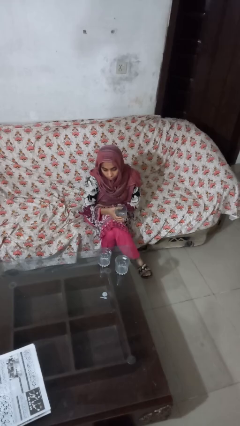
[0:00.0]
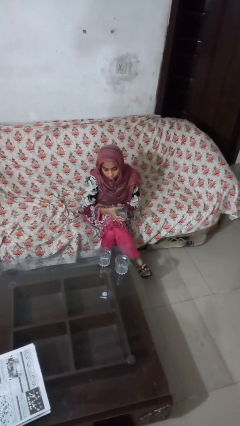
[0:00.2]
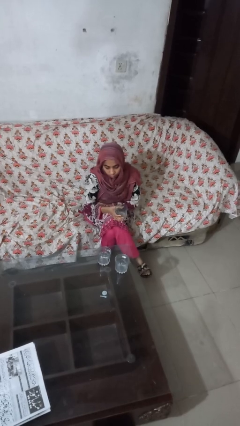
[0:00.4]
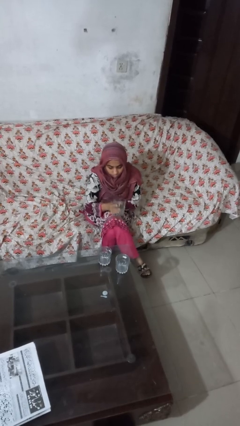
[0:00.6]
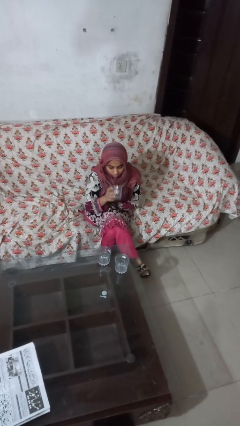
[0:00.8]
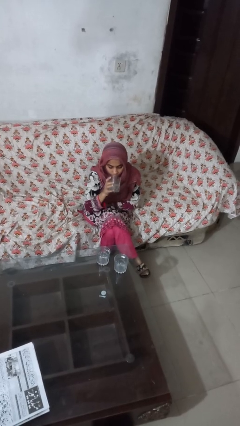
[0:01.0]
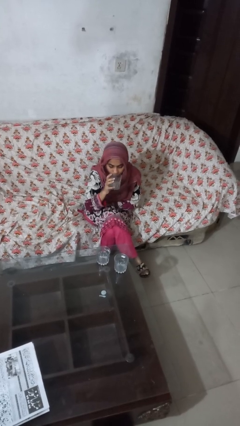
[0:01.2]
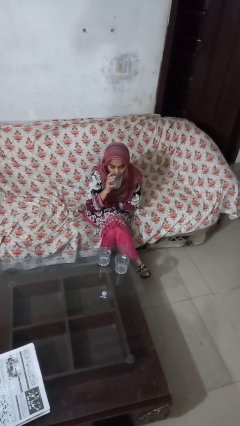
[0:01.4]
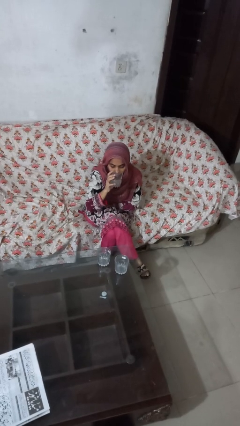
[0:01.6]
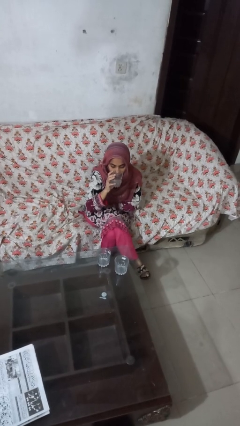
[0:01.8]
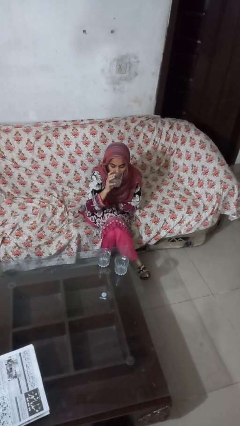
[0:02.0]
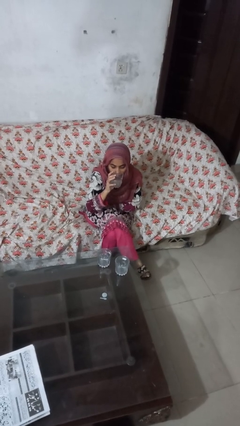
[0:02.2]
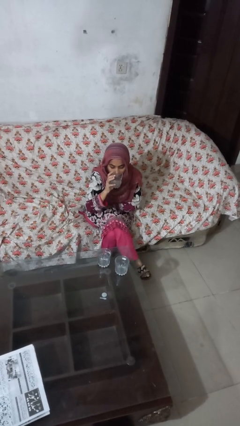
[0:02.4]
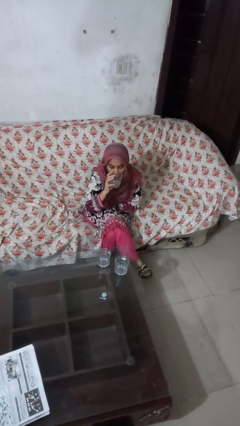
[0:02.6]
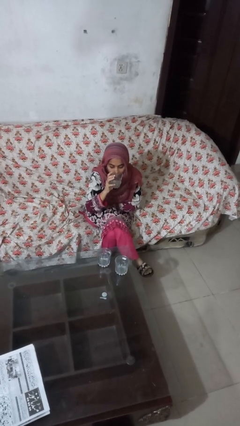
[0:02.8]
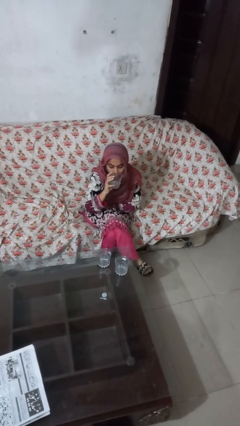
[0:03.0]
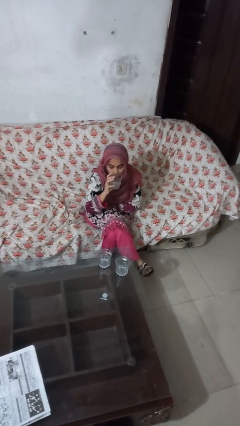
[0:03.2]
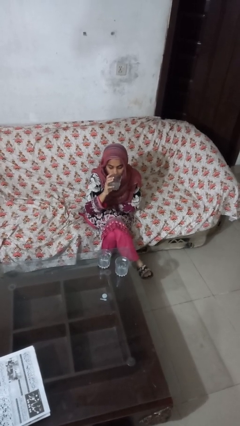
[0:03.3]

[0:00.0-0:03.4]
person drinks from shotglass

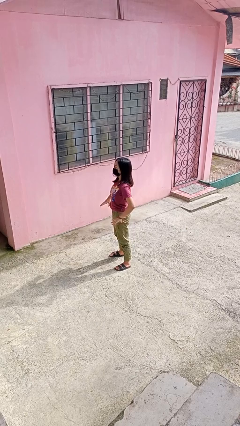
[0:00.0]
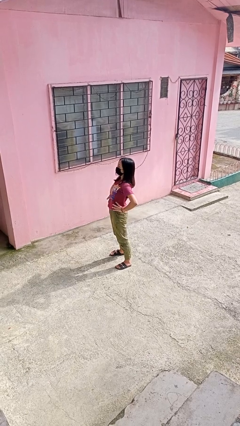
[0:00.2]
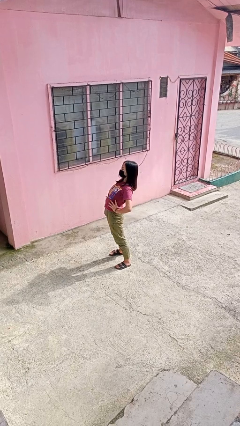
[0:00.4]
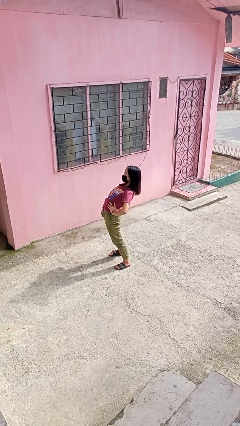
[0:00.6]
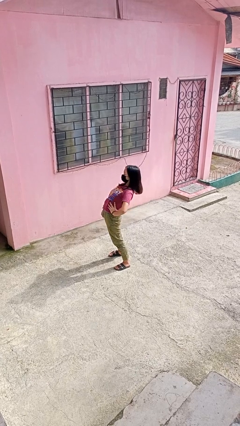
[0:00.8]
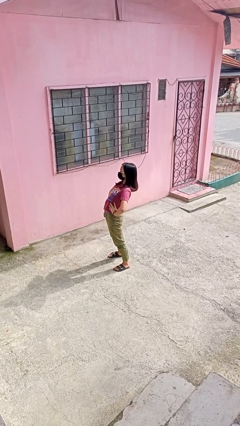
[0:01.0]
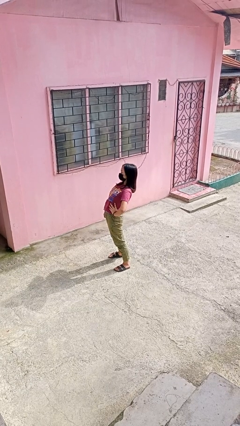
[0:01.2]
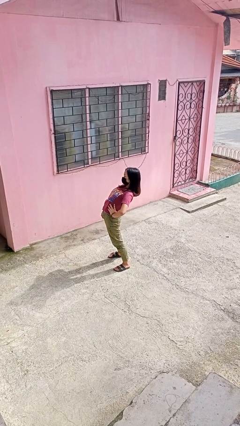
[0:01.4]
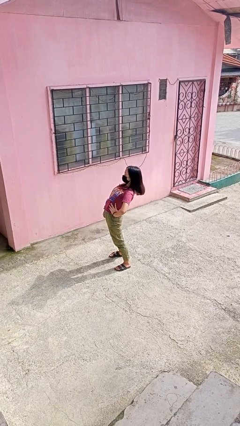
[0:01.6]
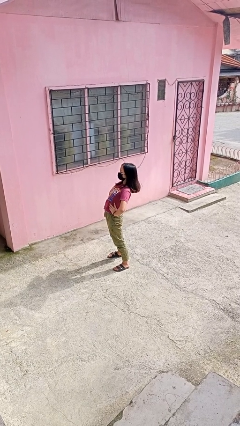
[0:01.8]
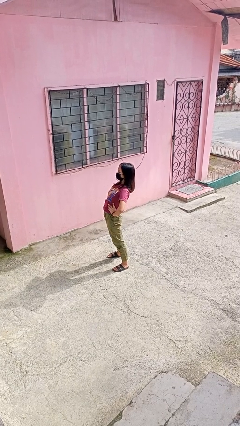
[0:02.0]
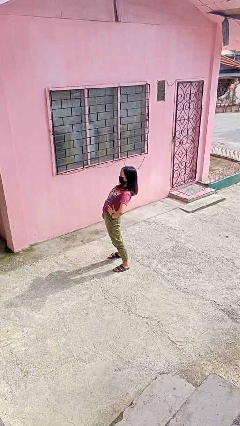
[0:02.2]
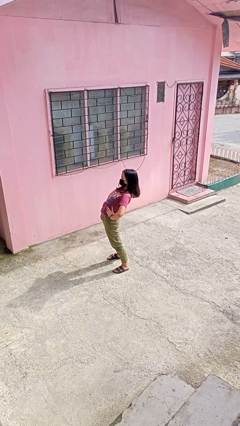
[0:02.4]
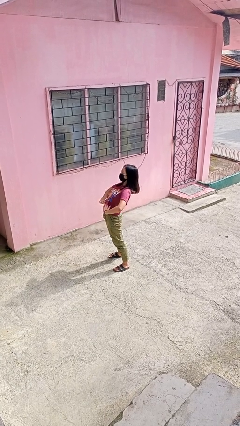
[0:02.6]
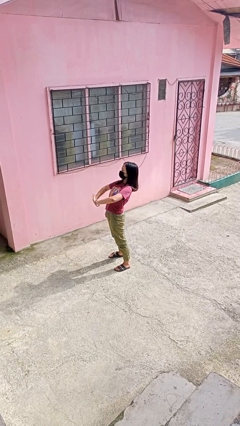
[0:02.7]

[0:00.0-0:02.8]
person stretches back

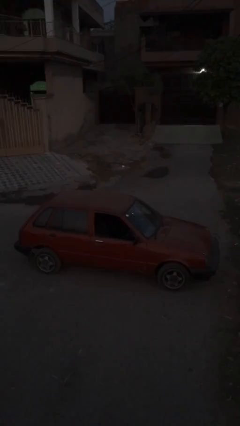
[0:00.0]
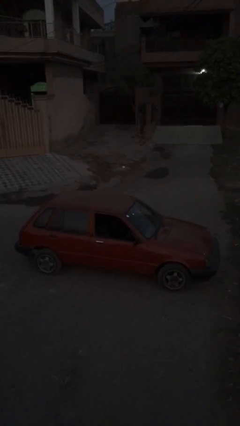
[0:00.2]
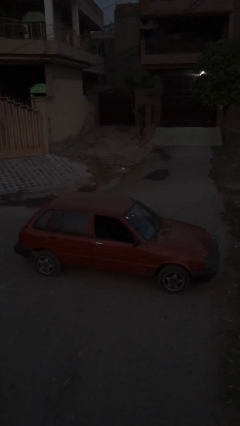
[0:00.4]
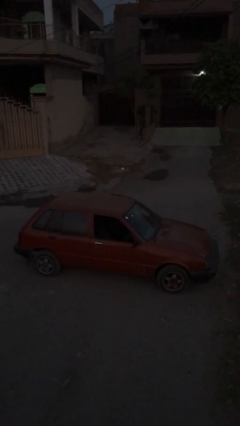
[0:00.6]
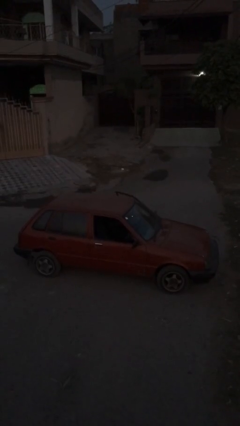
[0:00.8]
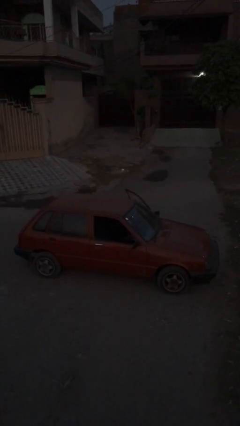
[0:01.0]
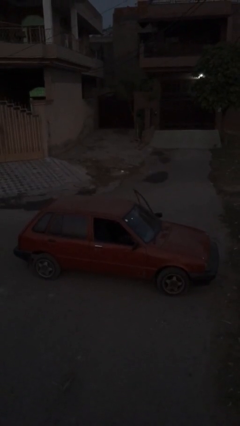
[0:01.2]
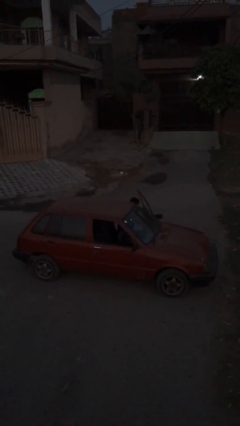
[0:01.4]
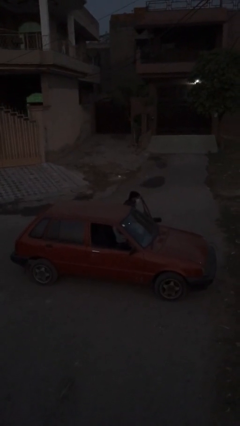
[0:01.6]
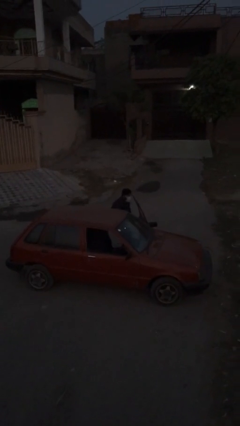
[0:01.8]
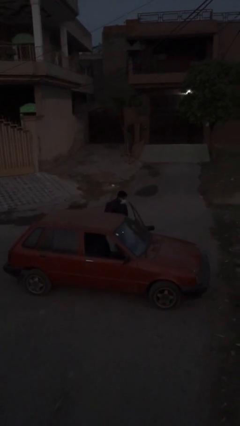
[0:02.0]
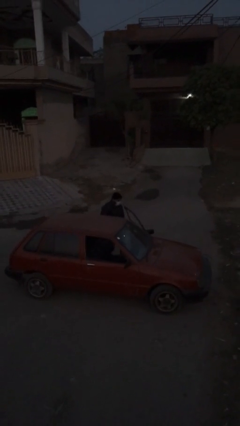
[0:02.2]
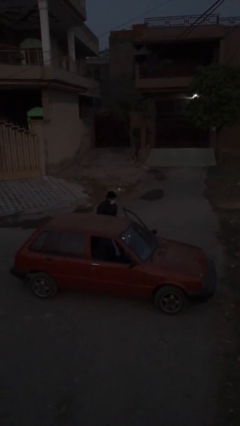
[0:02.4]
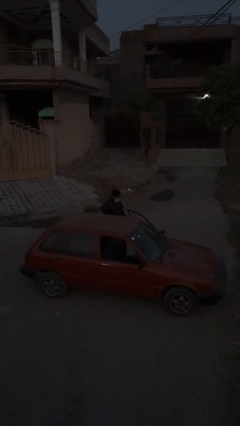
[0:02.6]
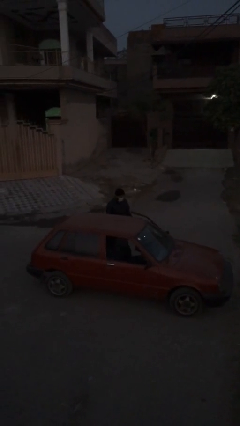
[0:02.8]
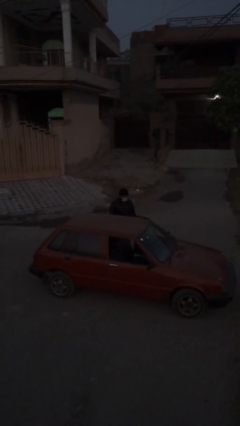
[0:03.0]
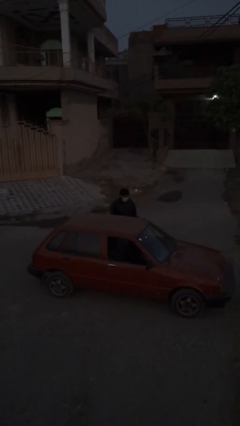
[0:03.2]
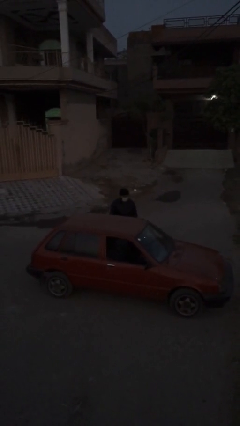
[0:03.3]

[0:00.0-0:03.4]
person exits car

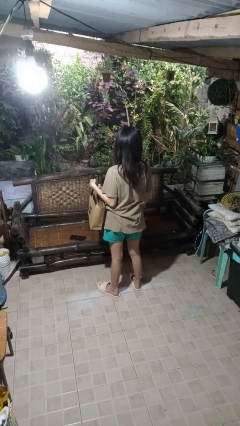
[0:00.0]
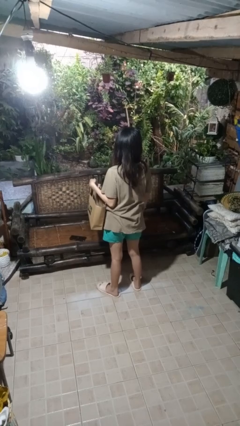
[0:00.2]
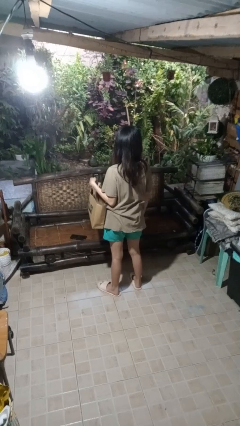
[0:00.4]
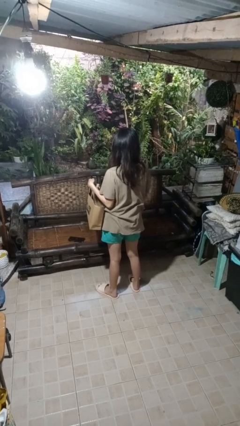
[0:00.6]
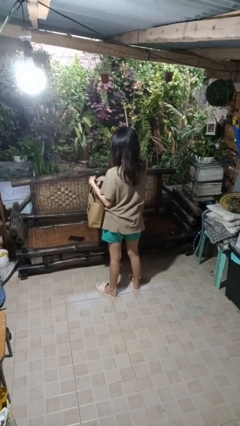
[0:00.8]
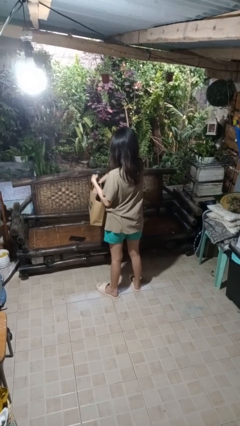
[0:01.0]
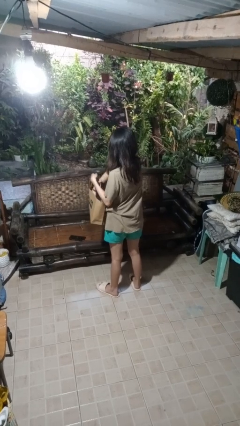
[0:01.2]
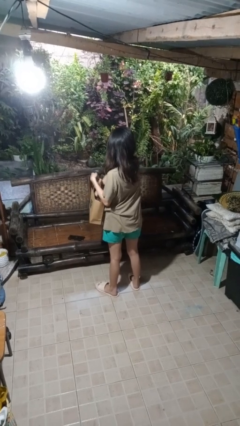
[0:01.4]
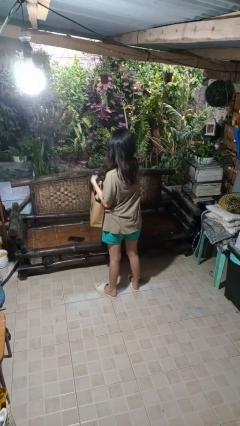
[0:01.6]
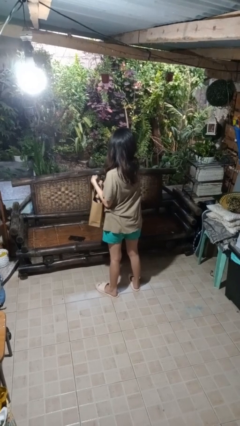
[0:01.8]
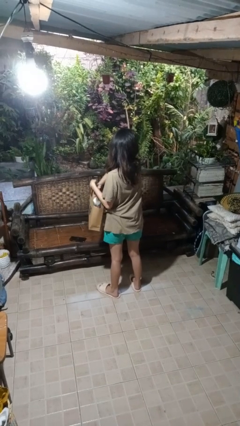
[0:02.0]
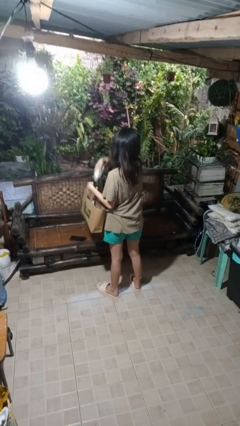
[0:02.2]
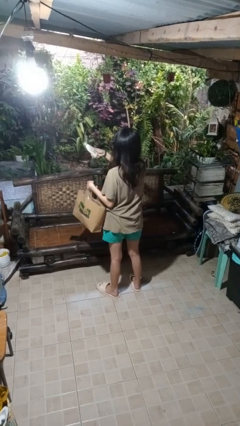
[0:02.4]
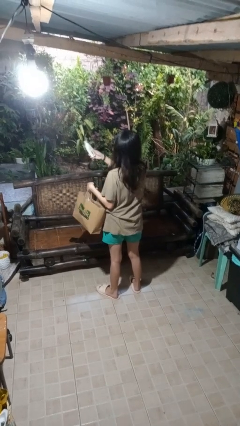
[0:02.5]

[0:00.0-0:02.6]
person takes object from bag

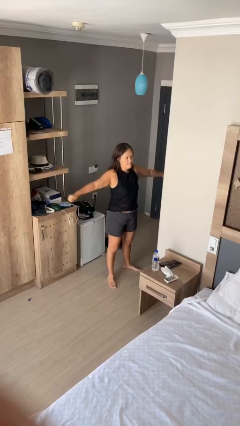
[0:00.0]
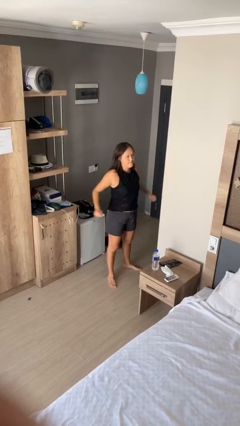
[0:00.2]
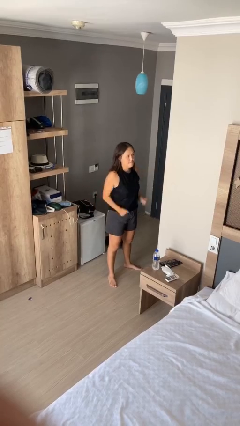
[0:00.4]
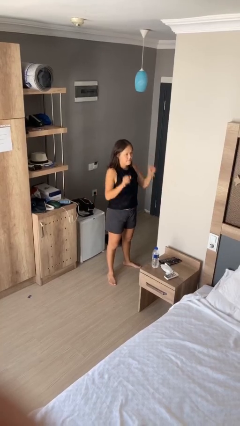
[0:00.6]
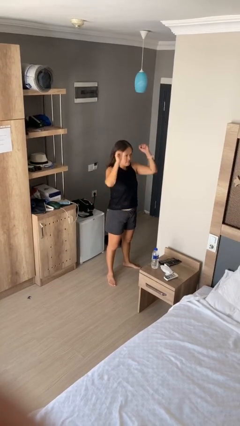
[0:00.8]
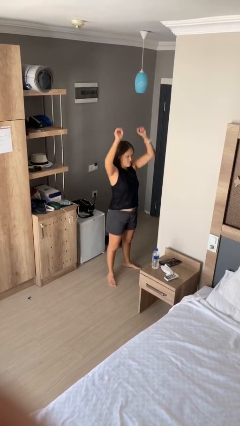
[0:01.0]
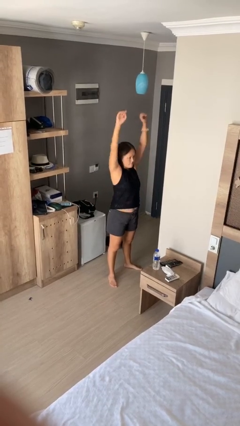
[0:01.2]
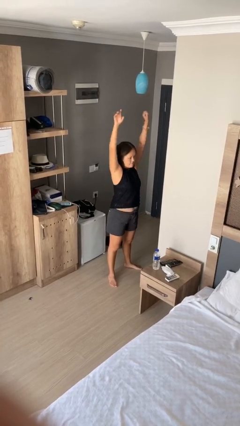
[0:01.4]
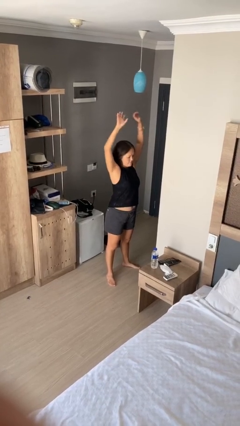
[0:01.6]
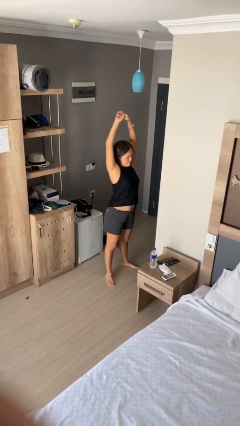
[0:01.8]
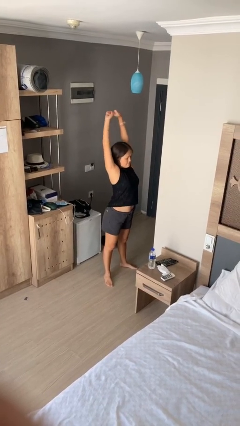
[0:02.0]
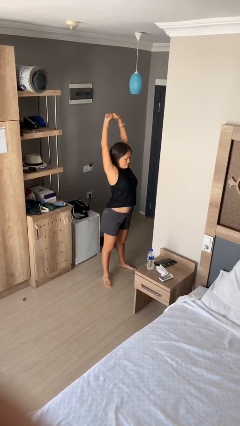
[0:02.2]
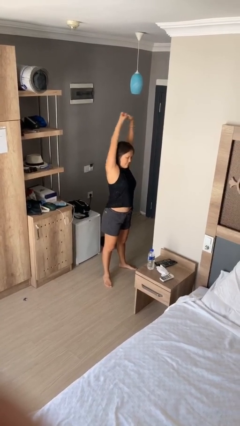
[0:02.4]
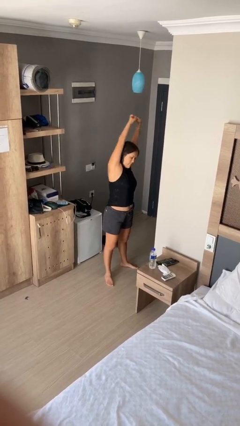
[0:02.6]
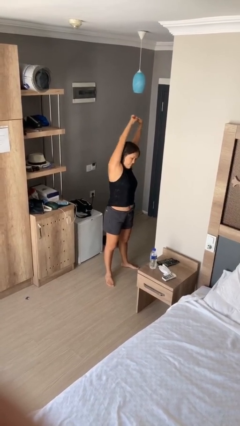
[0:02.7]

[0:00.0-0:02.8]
person stretches arms over head

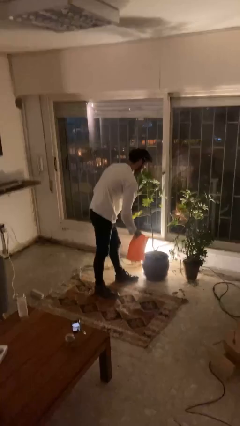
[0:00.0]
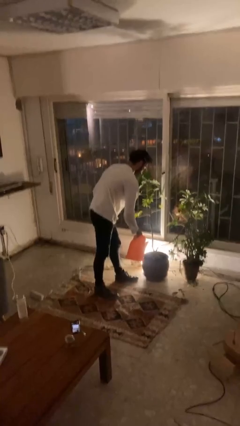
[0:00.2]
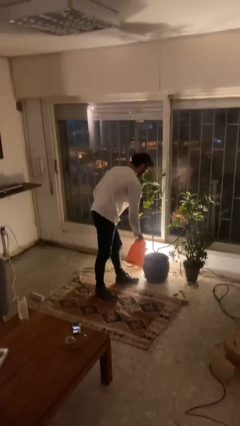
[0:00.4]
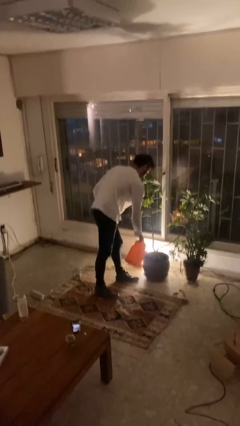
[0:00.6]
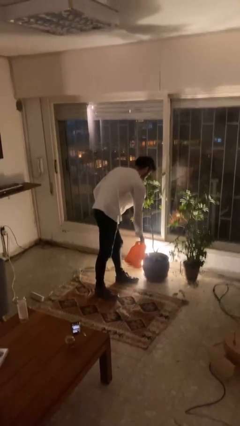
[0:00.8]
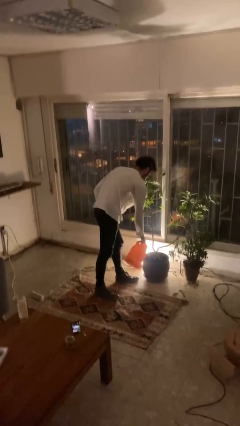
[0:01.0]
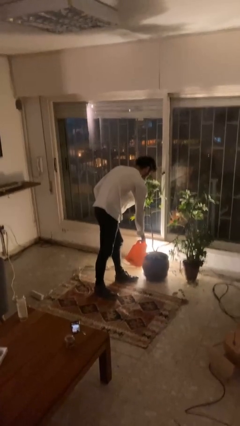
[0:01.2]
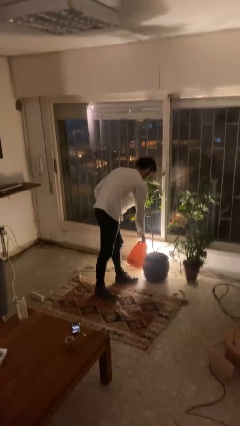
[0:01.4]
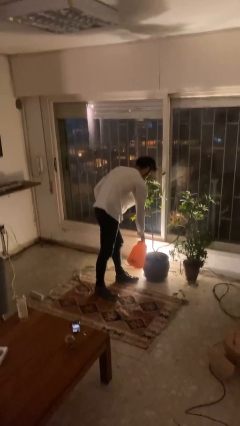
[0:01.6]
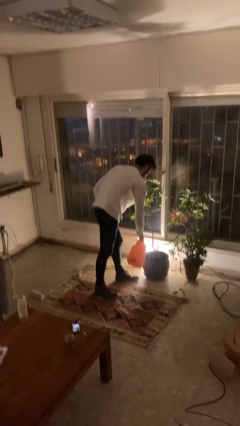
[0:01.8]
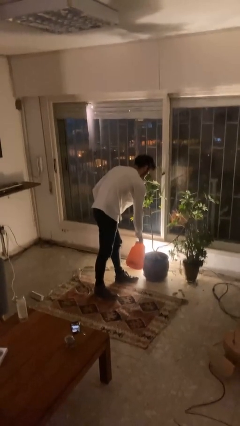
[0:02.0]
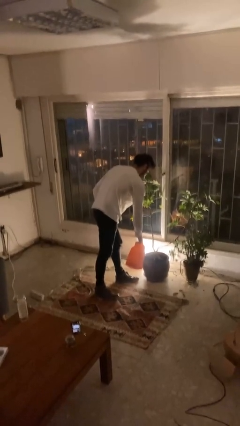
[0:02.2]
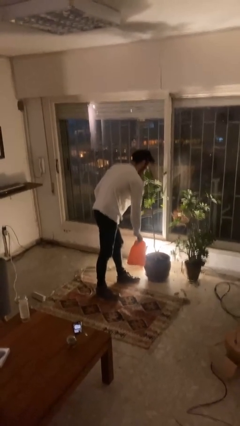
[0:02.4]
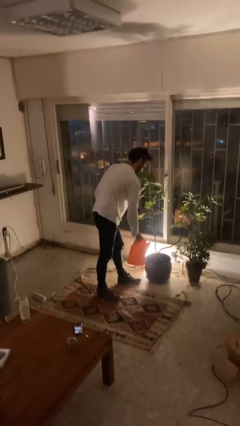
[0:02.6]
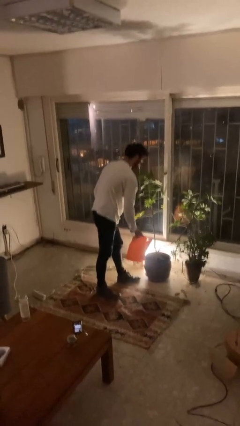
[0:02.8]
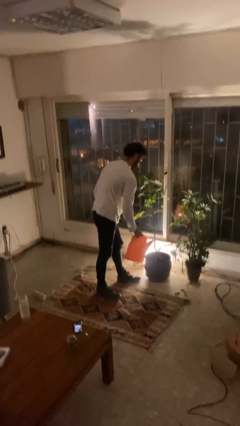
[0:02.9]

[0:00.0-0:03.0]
person waters houseplant
